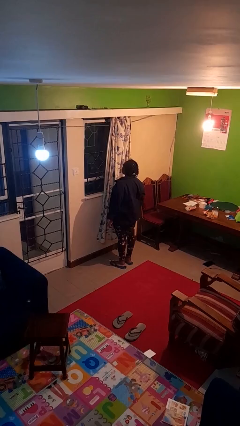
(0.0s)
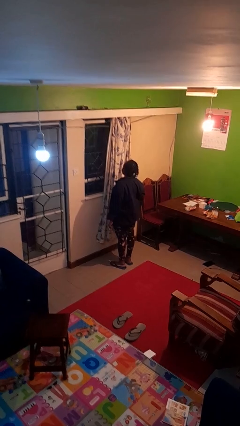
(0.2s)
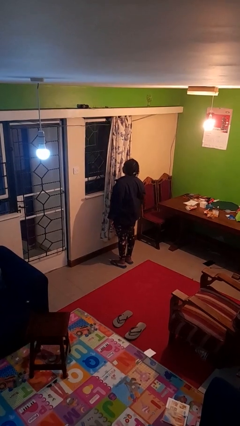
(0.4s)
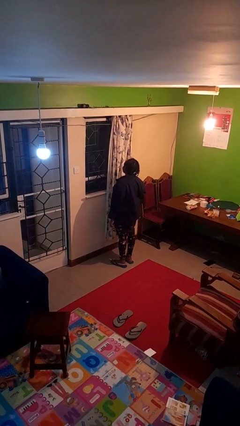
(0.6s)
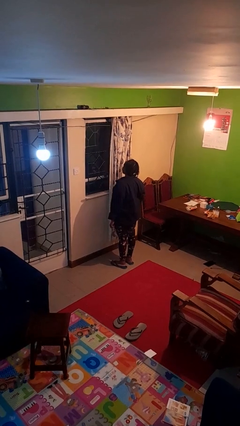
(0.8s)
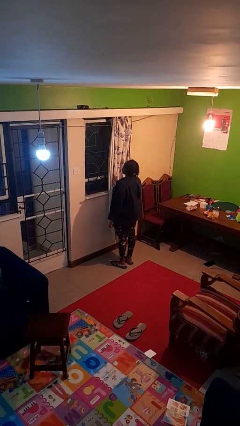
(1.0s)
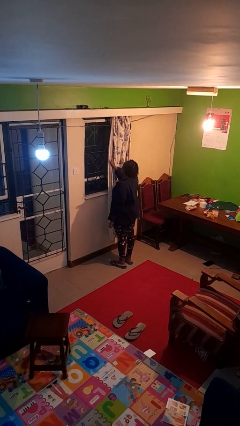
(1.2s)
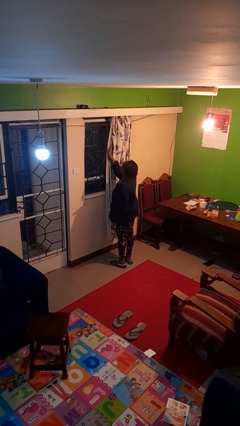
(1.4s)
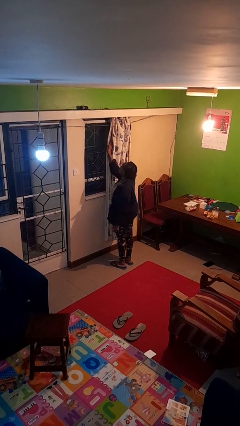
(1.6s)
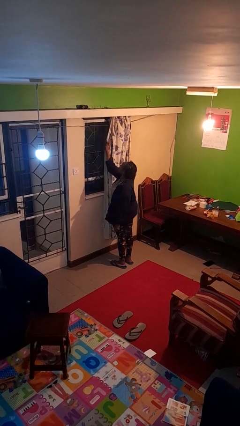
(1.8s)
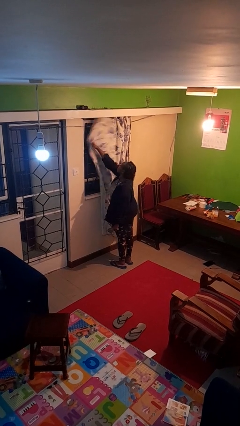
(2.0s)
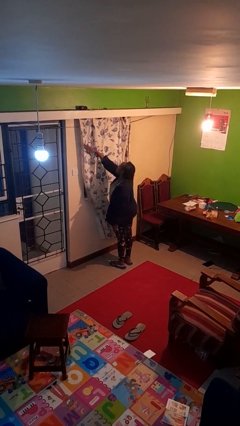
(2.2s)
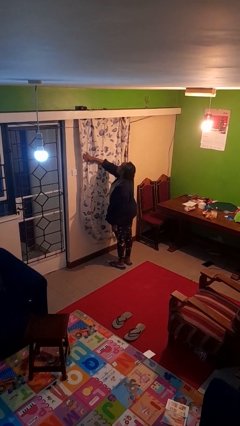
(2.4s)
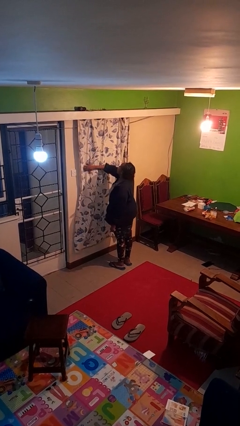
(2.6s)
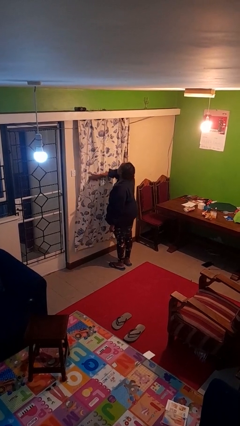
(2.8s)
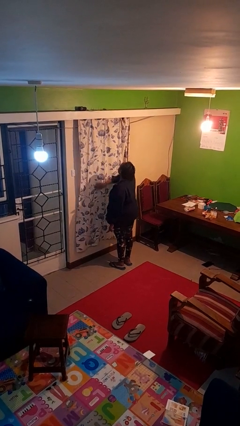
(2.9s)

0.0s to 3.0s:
person closes curtains

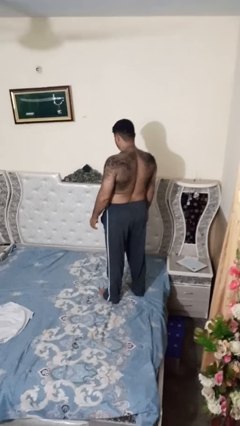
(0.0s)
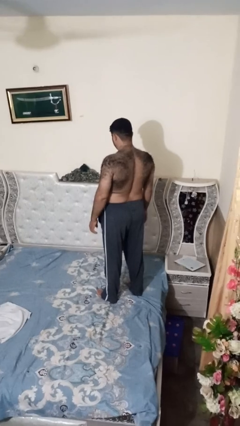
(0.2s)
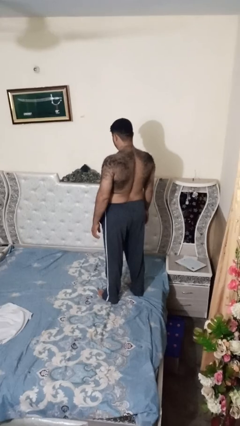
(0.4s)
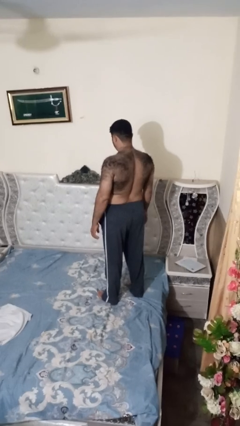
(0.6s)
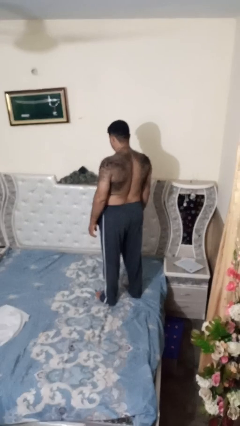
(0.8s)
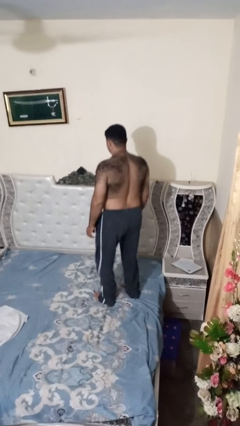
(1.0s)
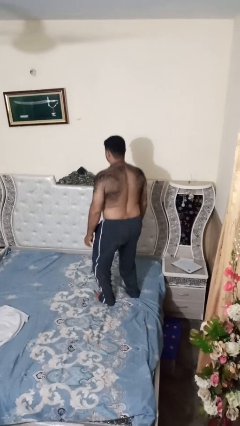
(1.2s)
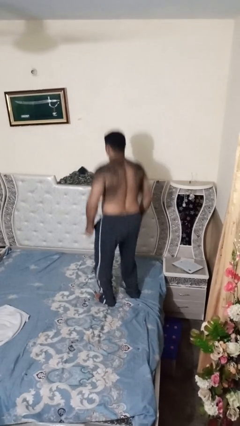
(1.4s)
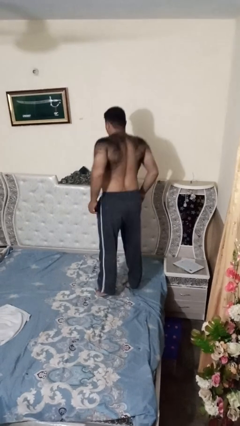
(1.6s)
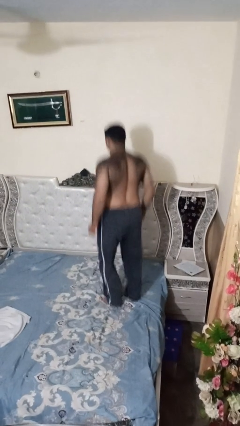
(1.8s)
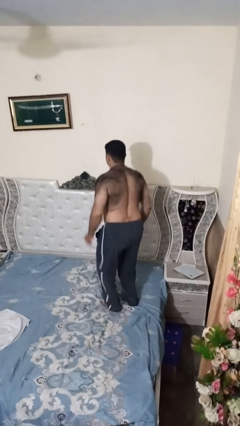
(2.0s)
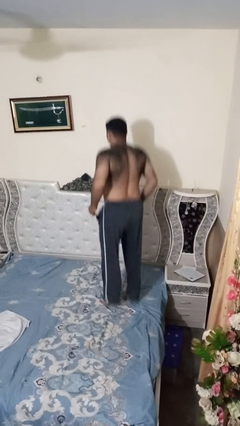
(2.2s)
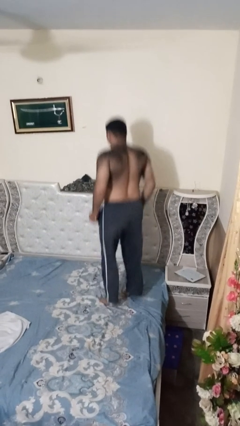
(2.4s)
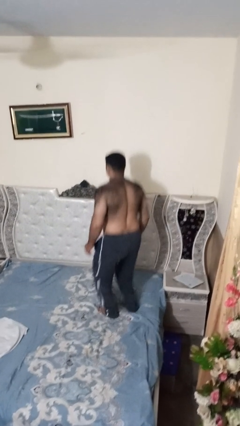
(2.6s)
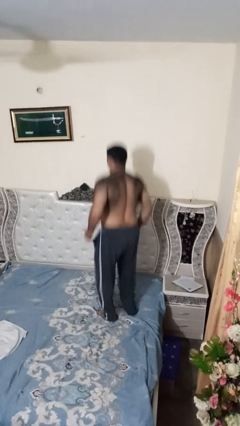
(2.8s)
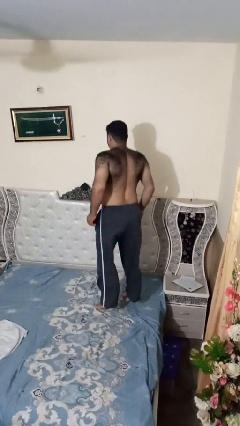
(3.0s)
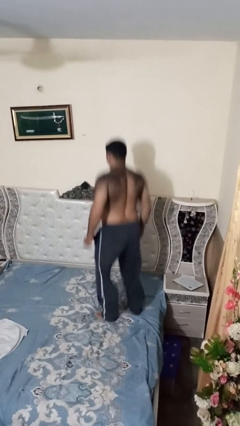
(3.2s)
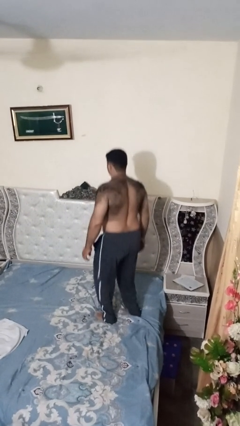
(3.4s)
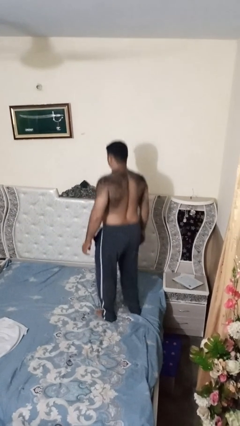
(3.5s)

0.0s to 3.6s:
person jumps on bed

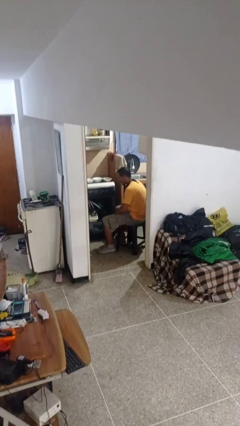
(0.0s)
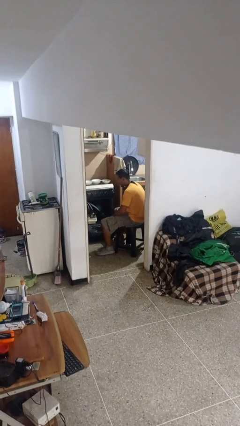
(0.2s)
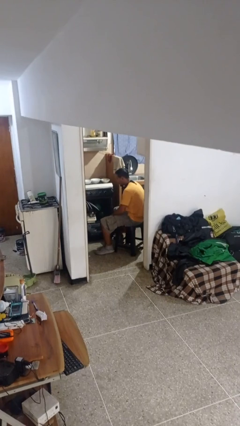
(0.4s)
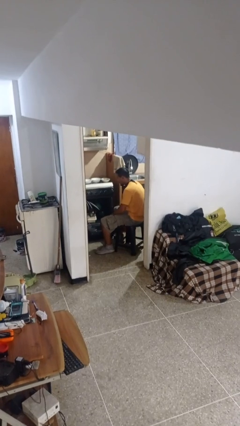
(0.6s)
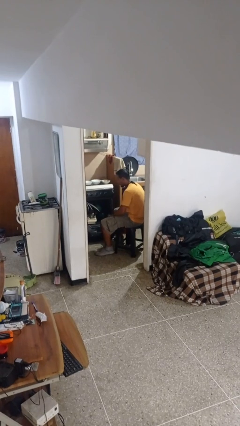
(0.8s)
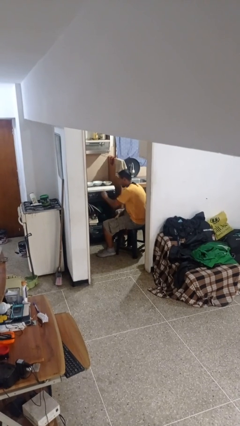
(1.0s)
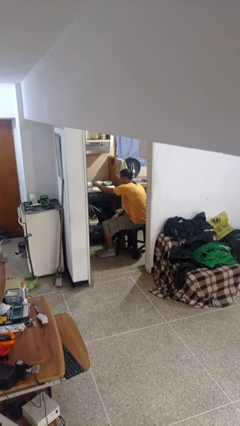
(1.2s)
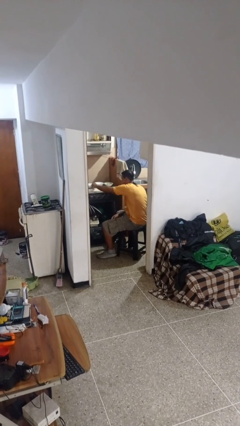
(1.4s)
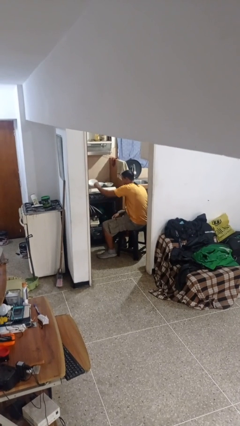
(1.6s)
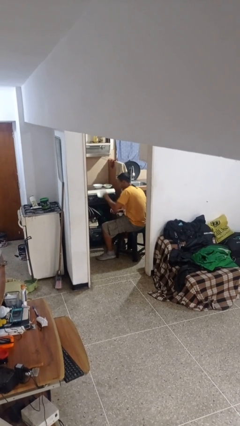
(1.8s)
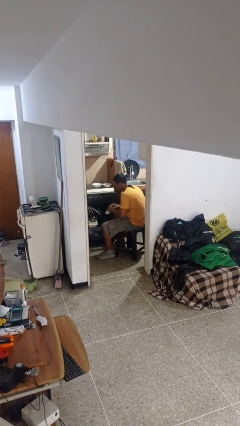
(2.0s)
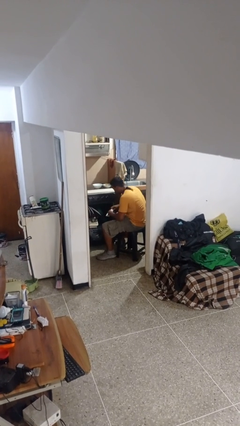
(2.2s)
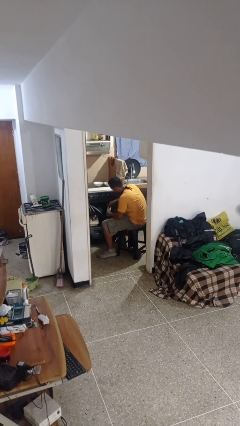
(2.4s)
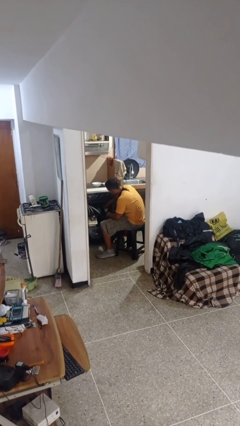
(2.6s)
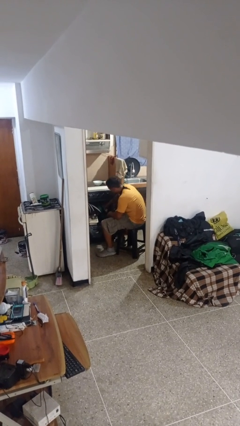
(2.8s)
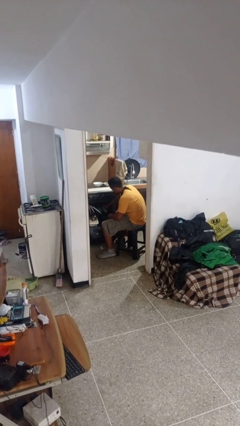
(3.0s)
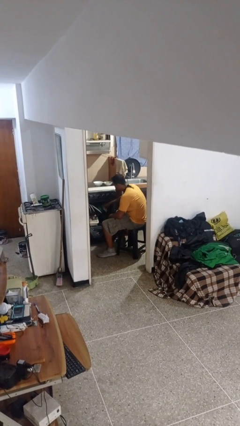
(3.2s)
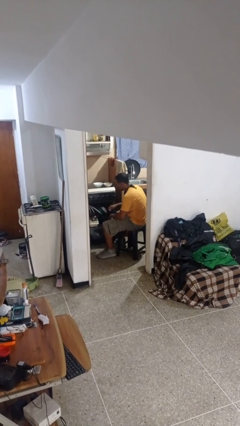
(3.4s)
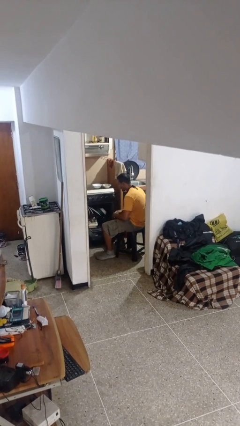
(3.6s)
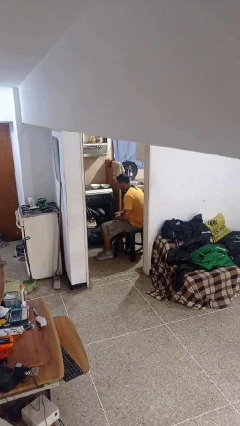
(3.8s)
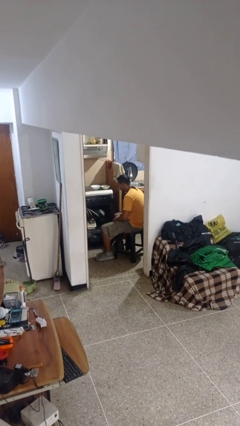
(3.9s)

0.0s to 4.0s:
person loads dishwasher

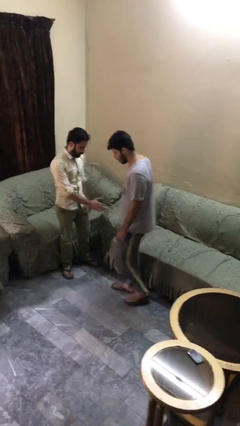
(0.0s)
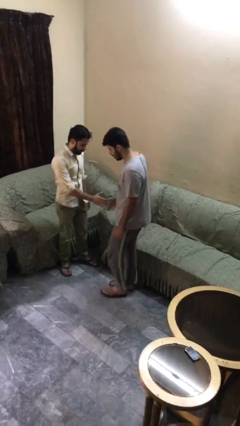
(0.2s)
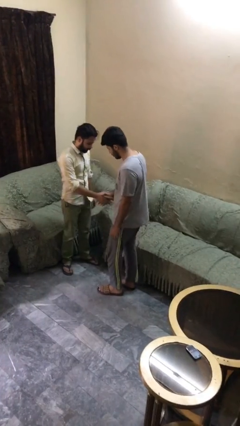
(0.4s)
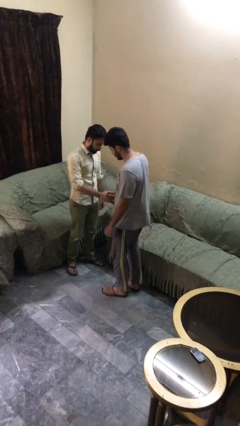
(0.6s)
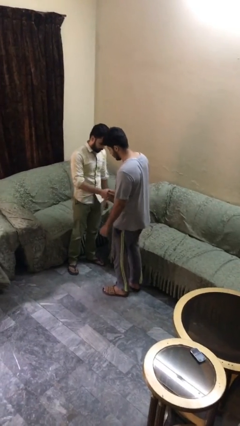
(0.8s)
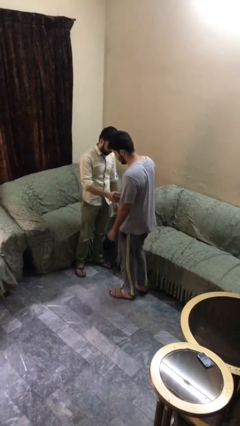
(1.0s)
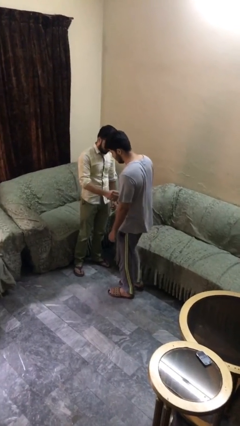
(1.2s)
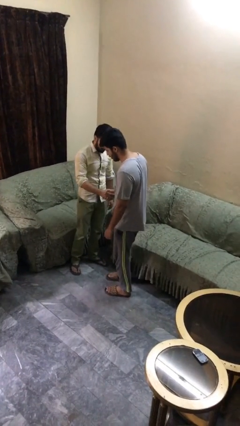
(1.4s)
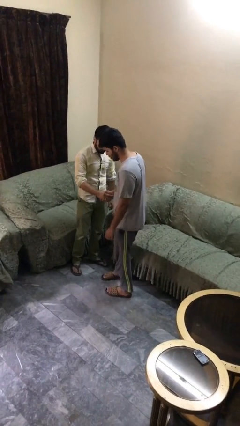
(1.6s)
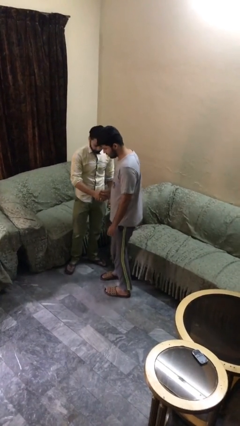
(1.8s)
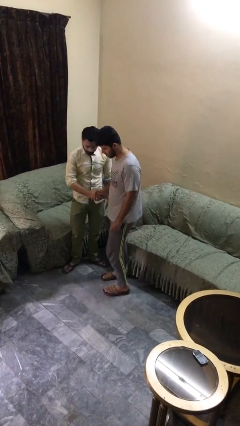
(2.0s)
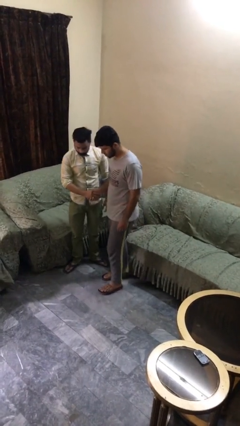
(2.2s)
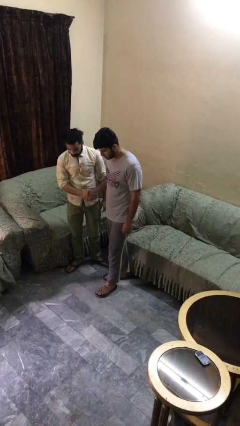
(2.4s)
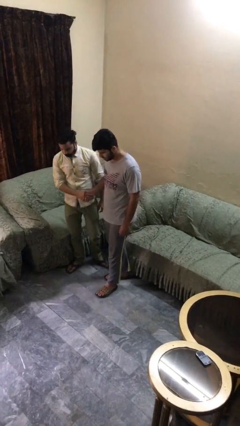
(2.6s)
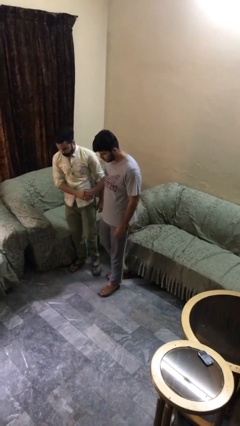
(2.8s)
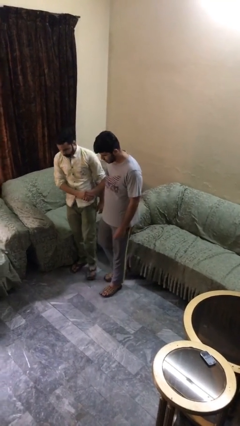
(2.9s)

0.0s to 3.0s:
person shakes hand

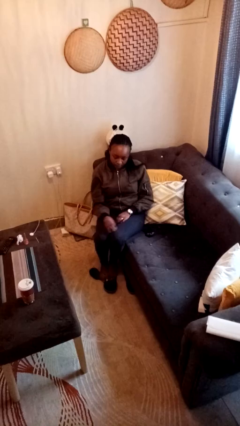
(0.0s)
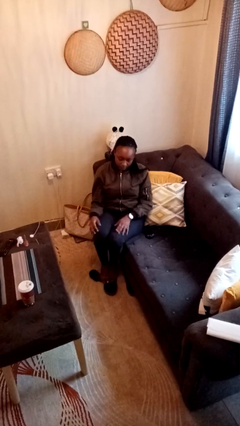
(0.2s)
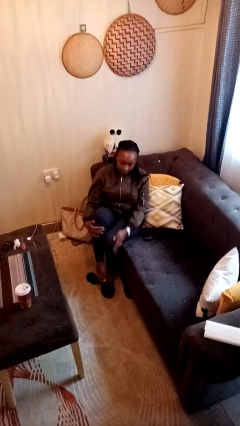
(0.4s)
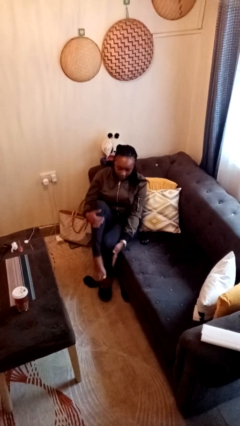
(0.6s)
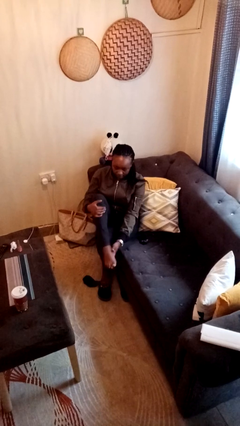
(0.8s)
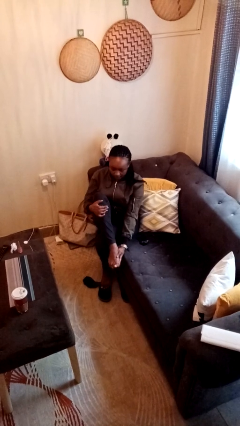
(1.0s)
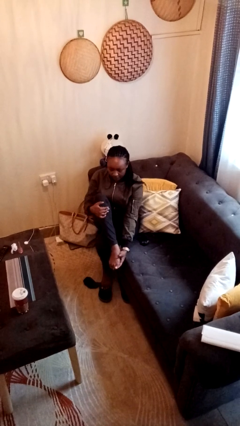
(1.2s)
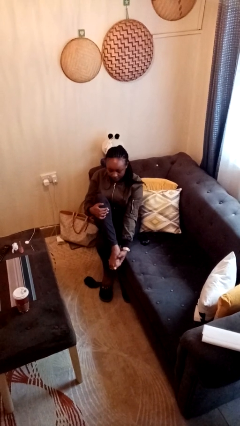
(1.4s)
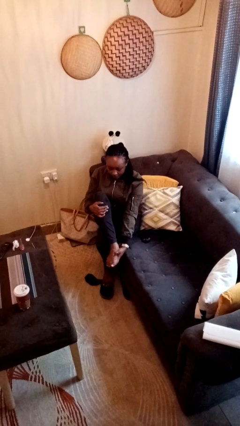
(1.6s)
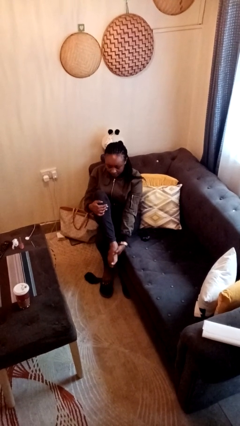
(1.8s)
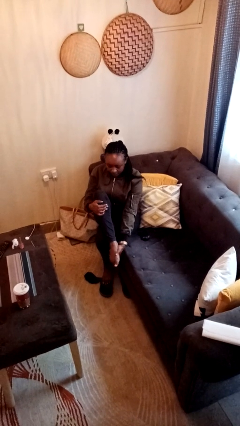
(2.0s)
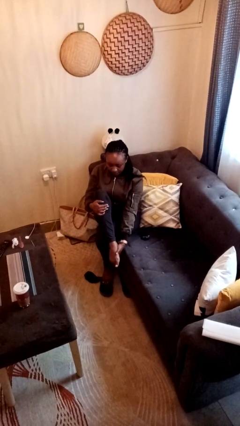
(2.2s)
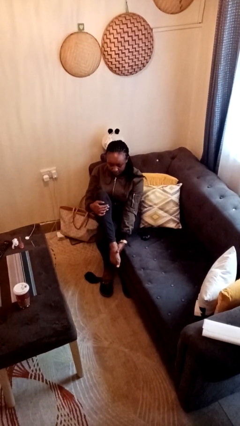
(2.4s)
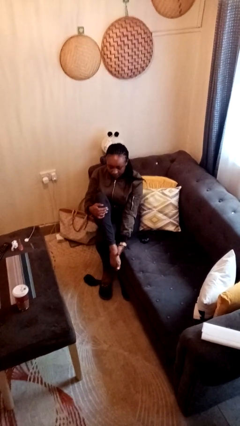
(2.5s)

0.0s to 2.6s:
person rubs foot

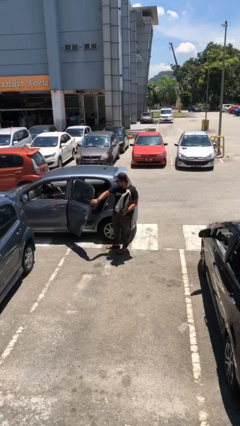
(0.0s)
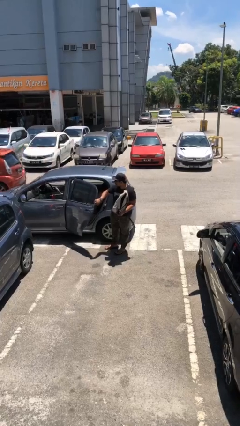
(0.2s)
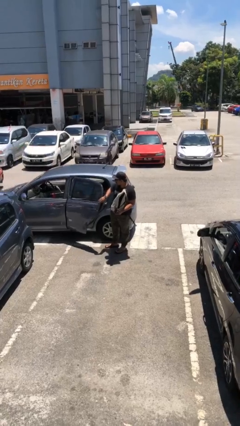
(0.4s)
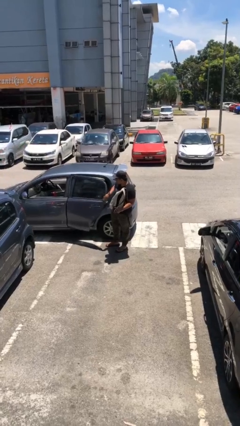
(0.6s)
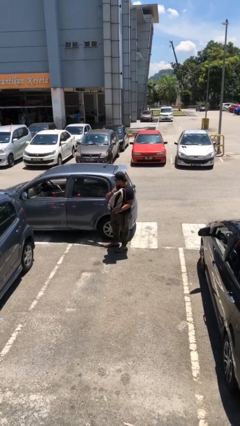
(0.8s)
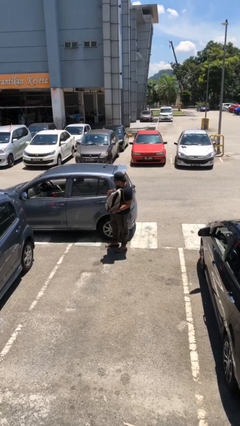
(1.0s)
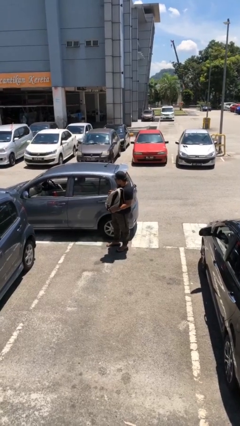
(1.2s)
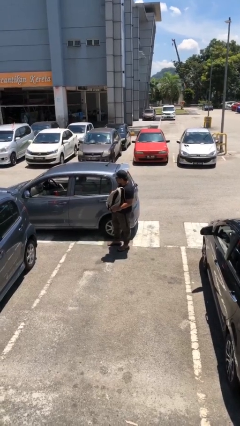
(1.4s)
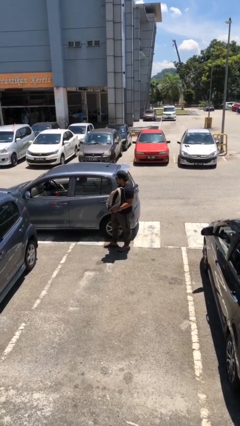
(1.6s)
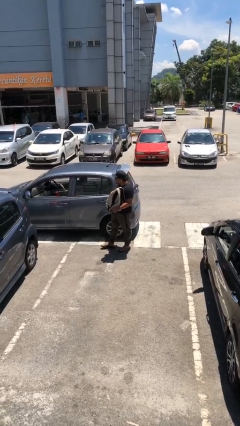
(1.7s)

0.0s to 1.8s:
person closes car door
